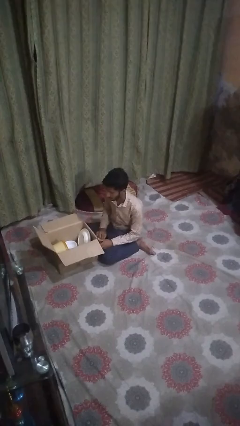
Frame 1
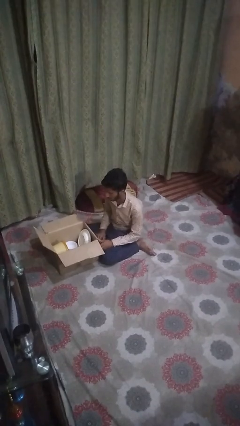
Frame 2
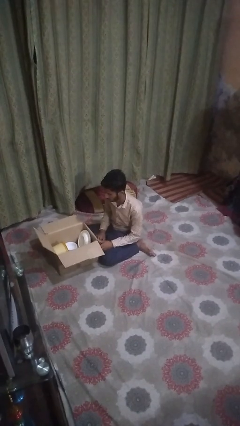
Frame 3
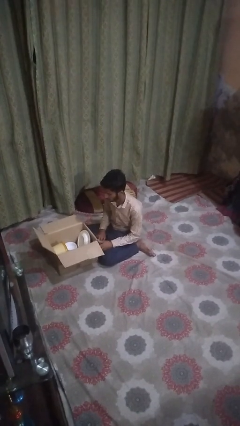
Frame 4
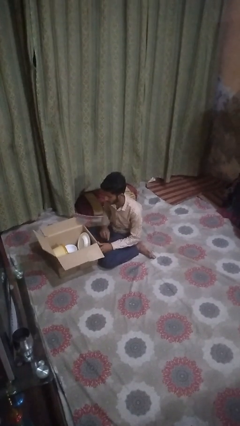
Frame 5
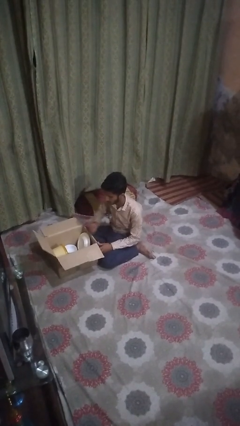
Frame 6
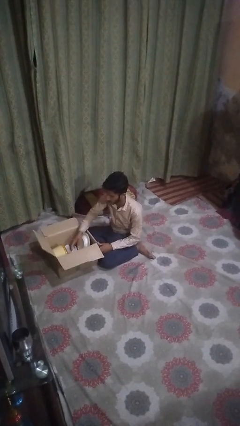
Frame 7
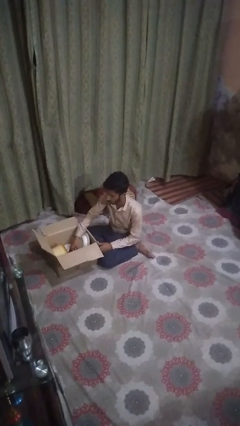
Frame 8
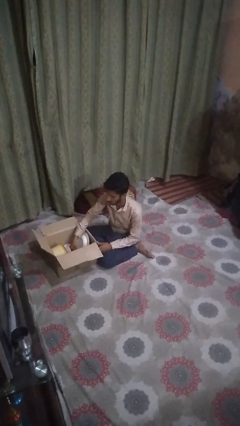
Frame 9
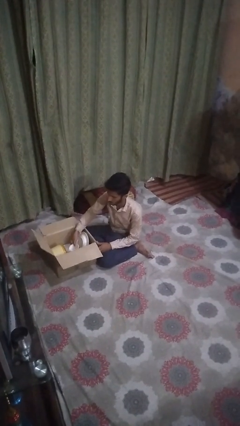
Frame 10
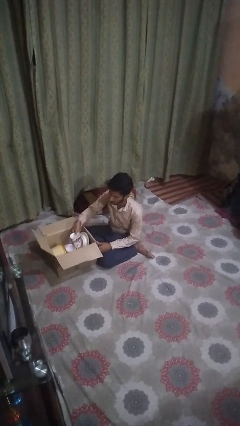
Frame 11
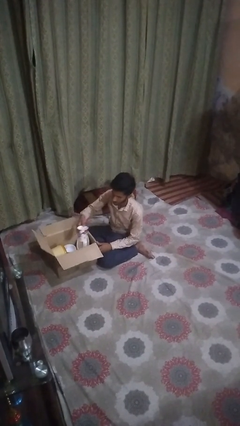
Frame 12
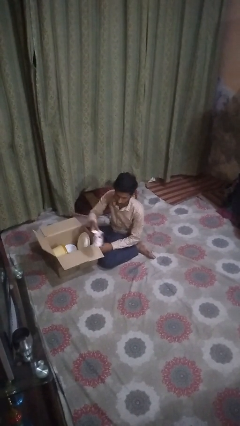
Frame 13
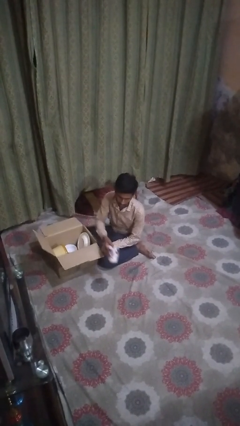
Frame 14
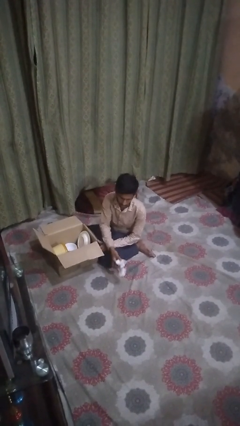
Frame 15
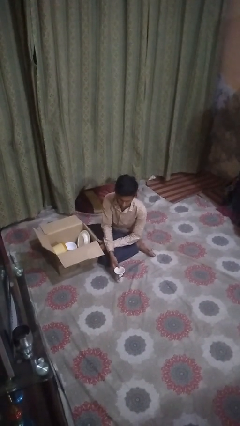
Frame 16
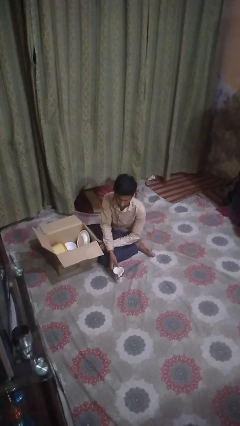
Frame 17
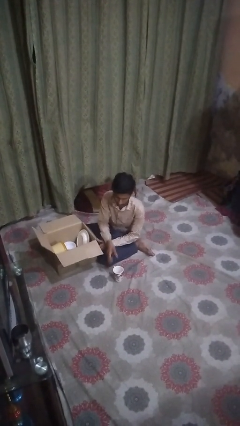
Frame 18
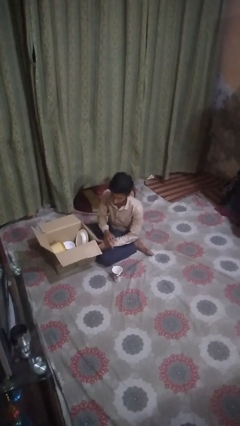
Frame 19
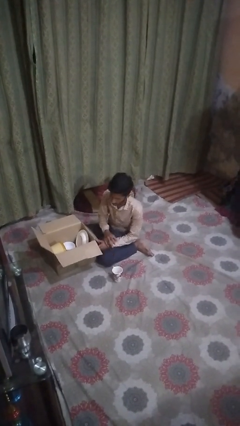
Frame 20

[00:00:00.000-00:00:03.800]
person takes object from box

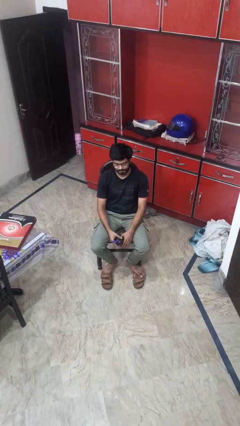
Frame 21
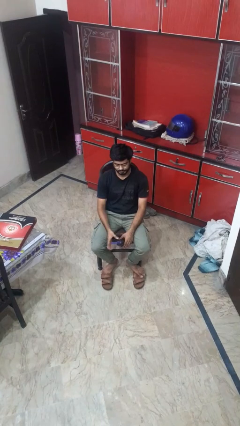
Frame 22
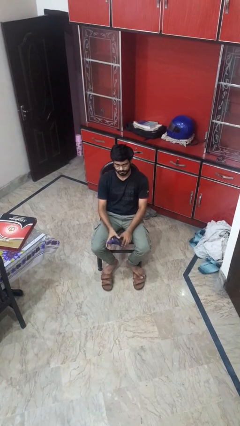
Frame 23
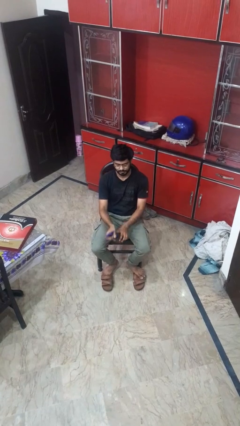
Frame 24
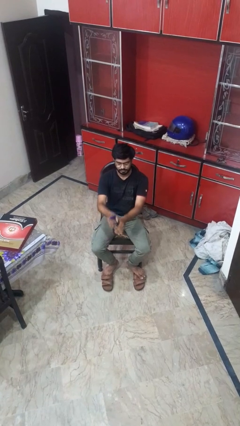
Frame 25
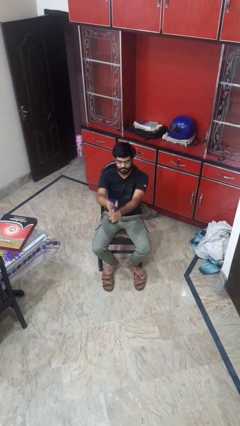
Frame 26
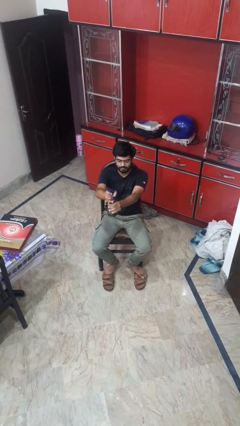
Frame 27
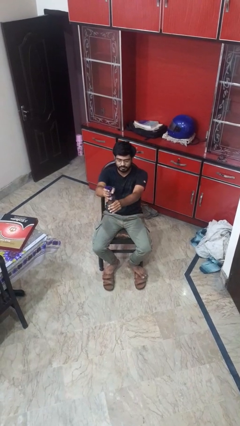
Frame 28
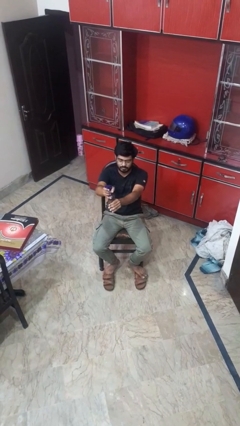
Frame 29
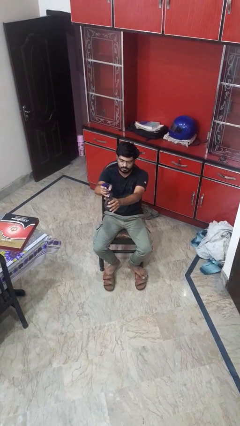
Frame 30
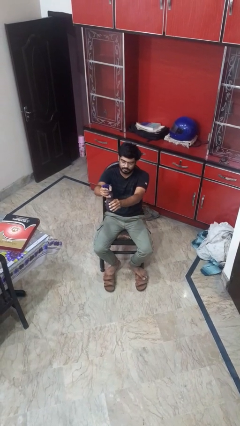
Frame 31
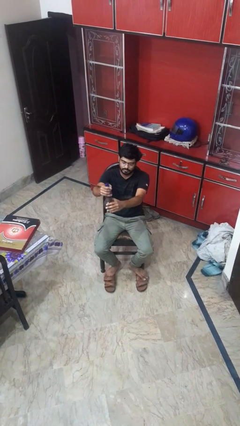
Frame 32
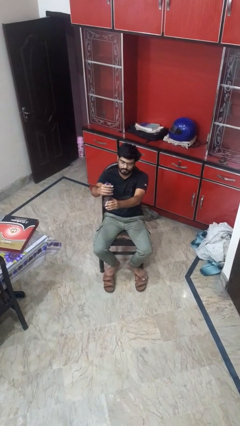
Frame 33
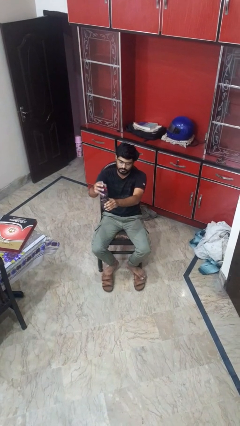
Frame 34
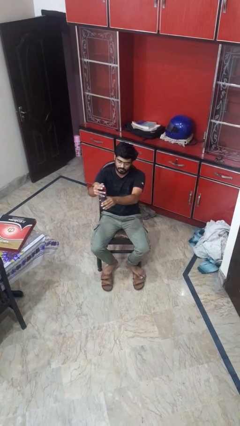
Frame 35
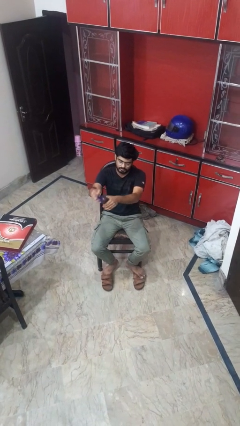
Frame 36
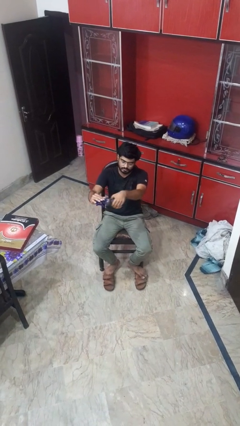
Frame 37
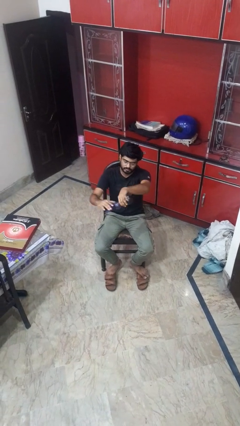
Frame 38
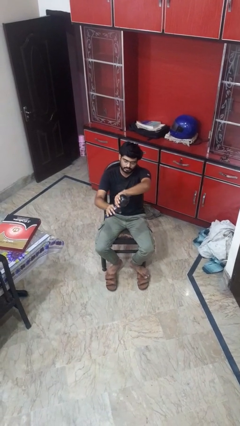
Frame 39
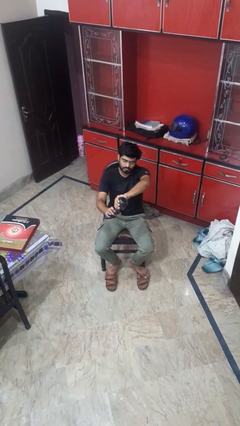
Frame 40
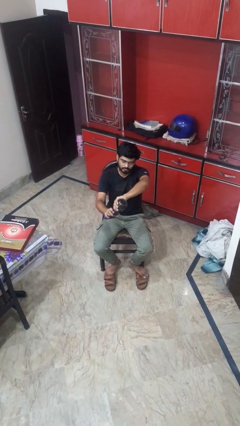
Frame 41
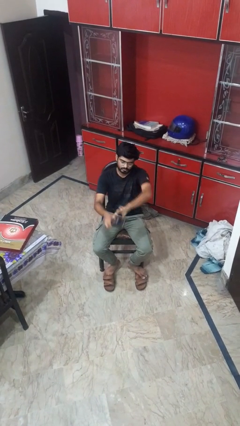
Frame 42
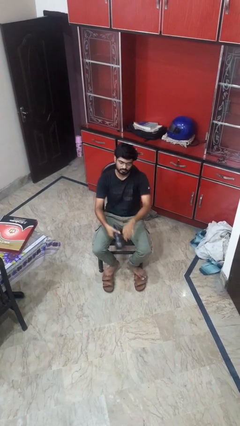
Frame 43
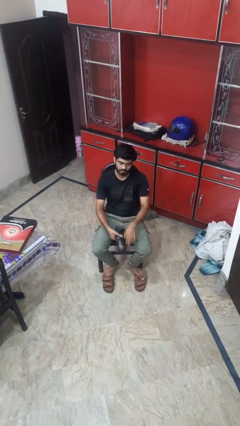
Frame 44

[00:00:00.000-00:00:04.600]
person squeezes object

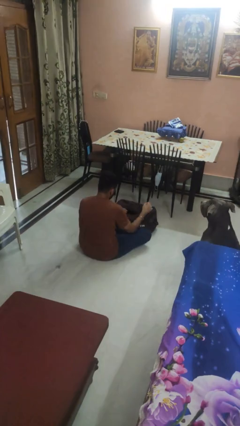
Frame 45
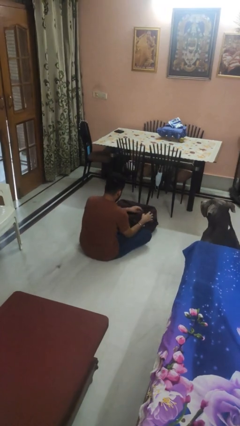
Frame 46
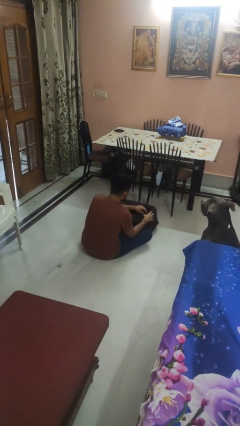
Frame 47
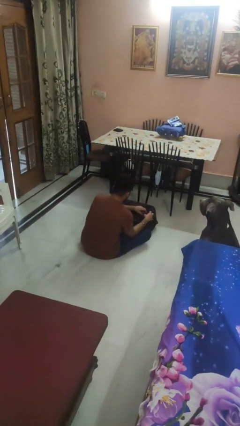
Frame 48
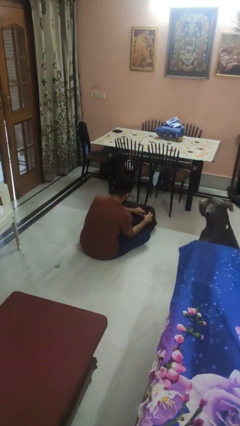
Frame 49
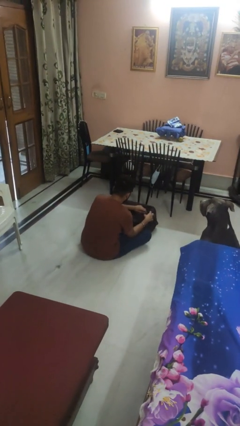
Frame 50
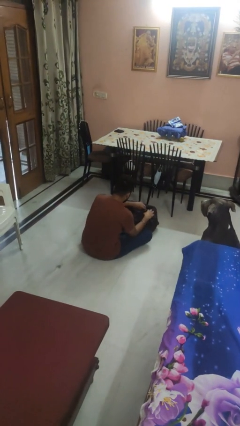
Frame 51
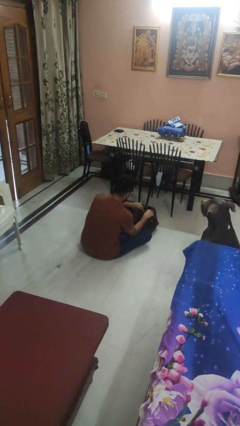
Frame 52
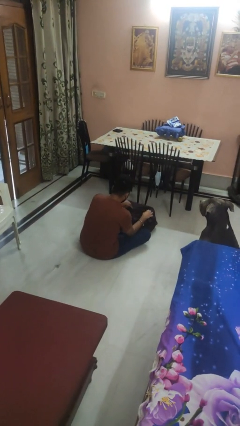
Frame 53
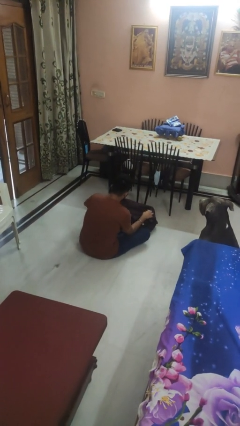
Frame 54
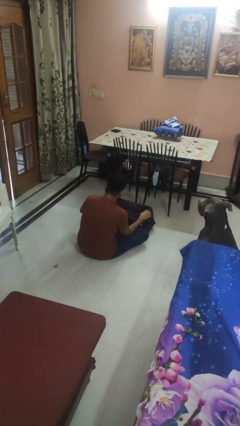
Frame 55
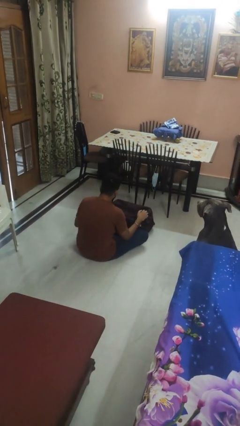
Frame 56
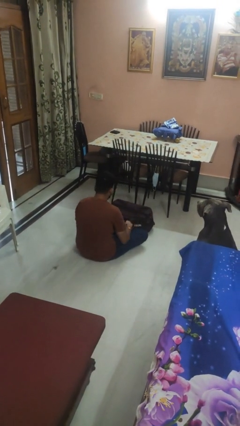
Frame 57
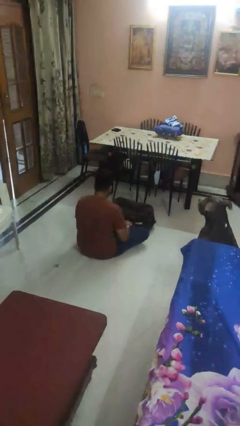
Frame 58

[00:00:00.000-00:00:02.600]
person closes suitcase

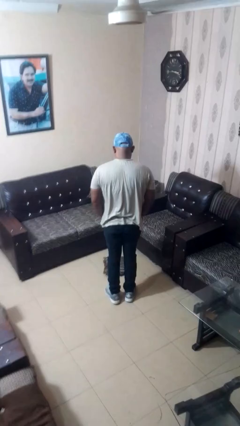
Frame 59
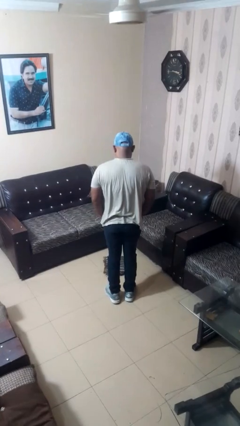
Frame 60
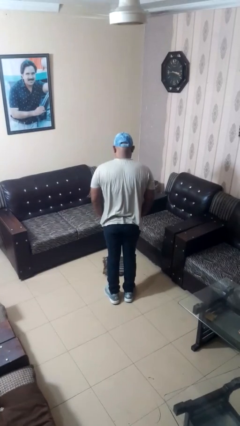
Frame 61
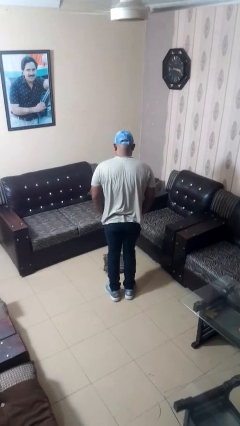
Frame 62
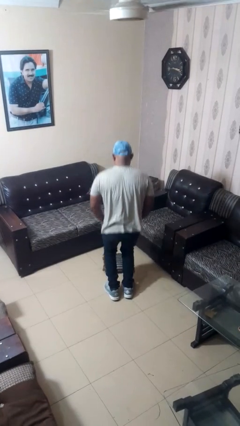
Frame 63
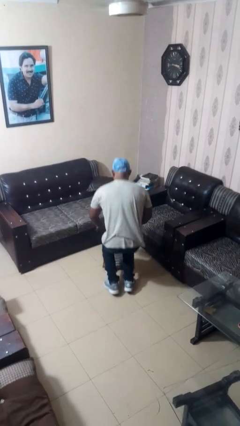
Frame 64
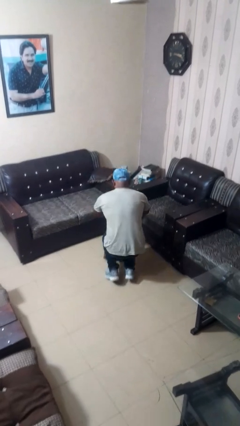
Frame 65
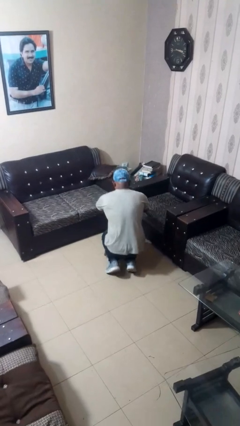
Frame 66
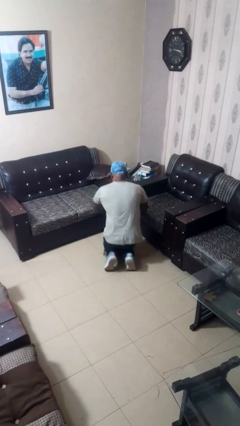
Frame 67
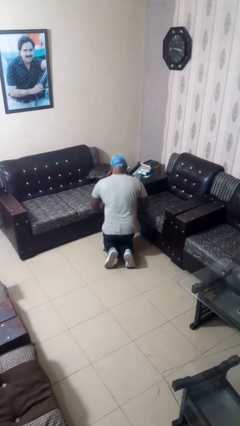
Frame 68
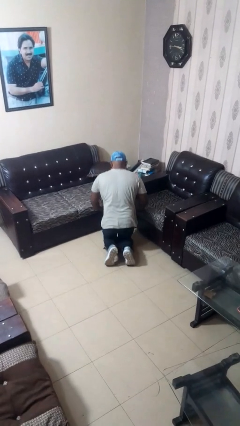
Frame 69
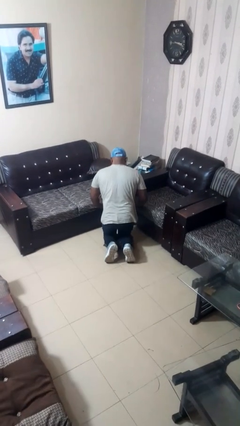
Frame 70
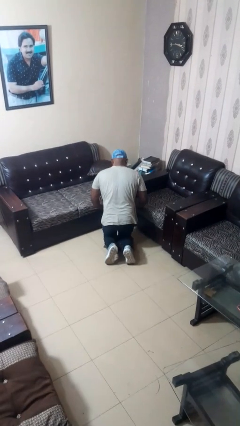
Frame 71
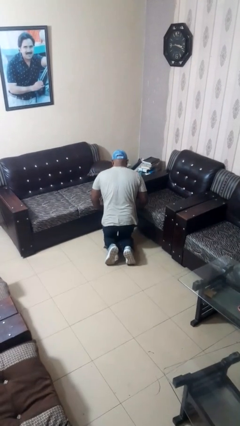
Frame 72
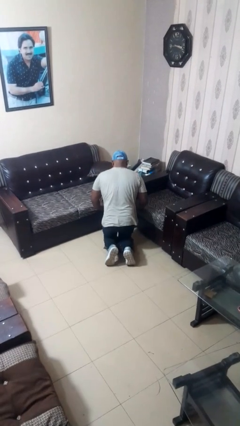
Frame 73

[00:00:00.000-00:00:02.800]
person kneels

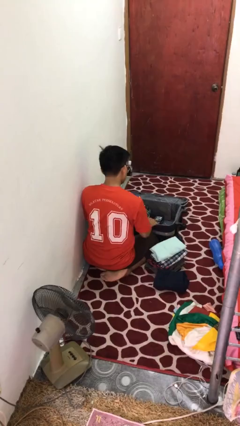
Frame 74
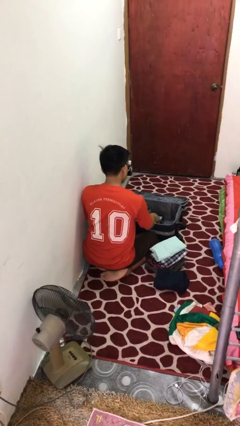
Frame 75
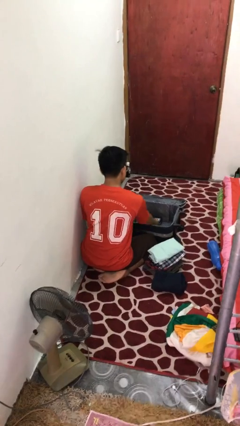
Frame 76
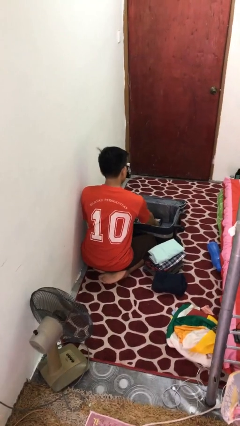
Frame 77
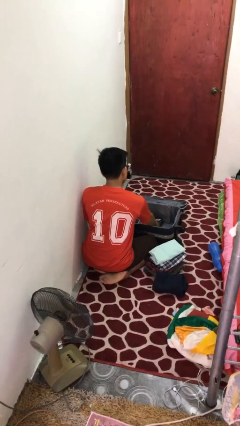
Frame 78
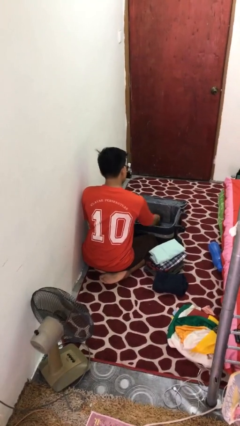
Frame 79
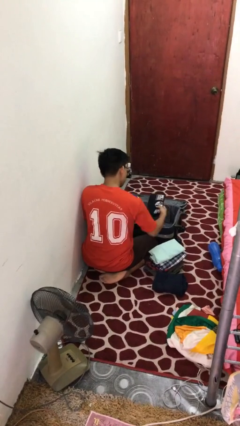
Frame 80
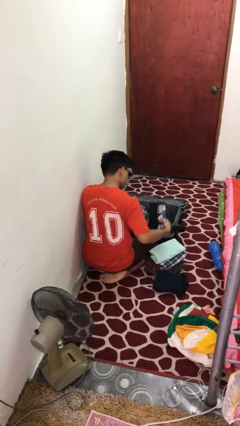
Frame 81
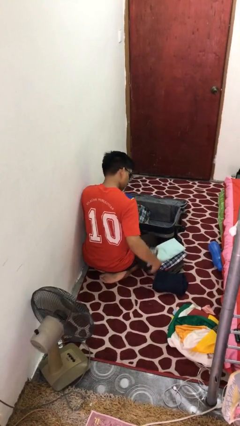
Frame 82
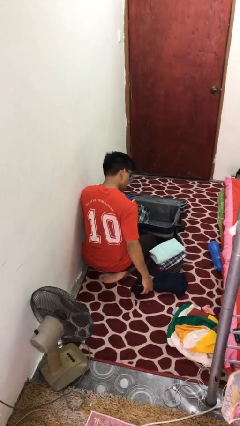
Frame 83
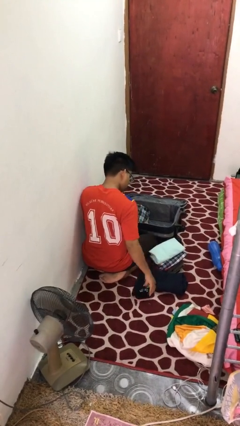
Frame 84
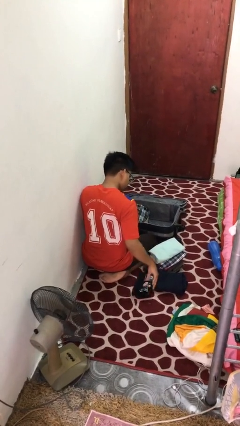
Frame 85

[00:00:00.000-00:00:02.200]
person unloads clothes from suitcase

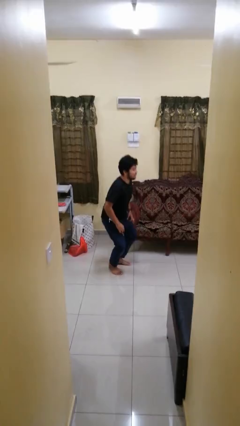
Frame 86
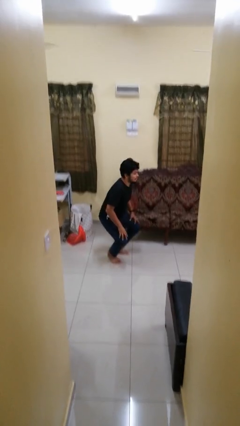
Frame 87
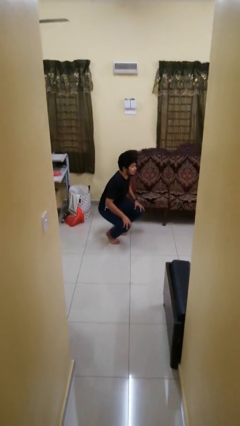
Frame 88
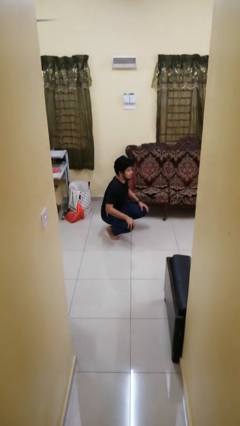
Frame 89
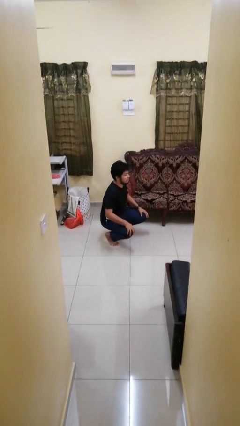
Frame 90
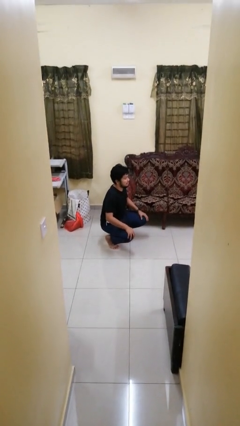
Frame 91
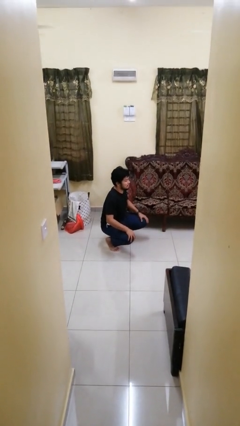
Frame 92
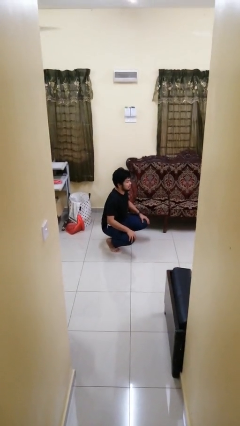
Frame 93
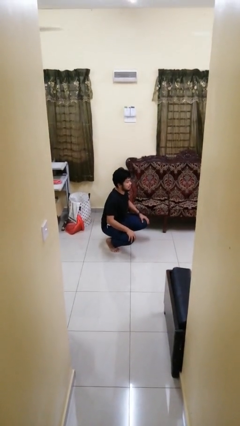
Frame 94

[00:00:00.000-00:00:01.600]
person squats
